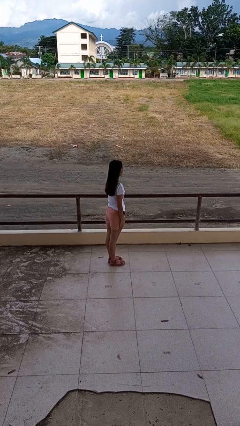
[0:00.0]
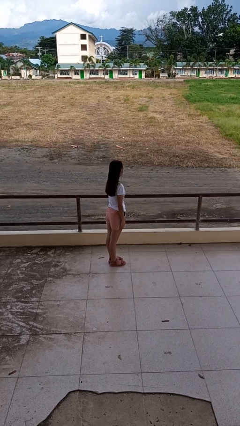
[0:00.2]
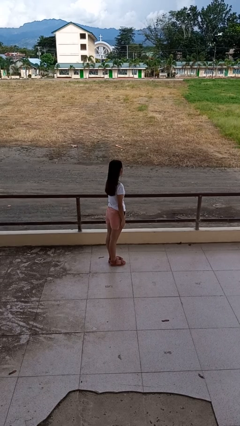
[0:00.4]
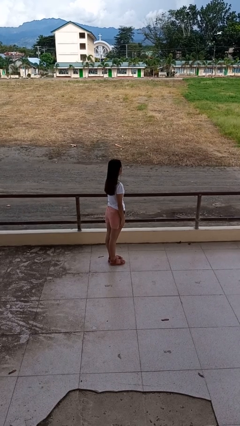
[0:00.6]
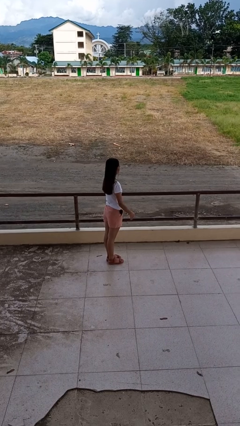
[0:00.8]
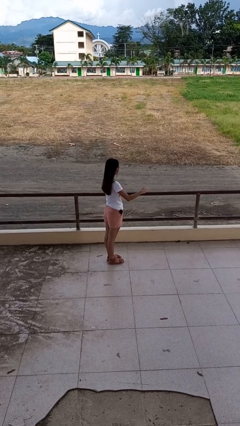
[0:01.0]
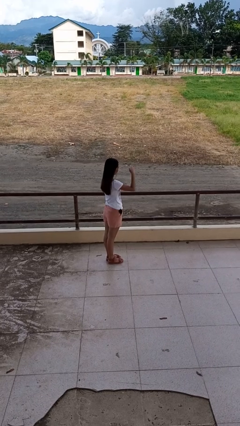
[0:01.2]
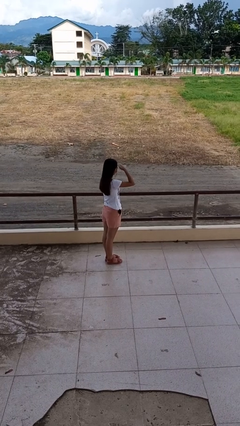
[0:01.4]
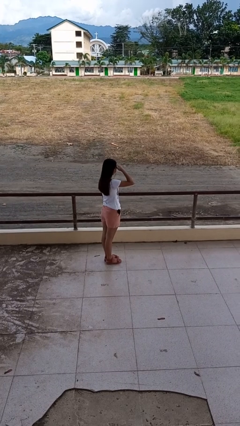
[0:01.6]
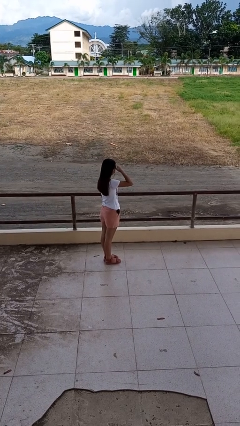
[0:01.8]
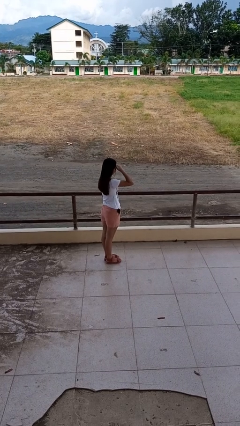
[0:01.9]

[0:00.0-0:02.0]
person shades eyes

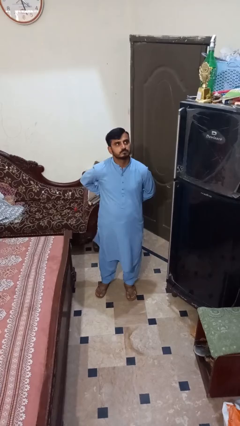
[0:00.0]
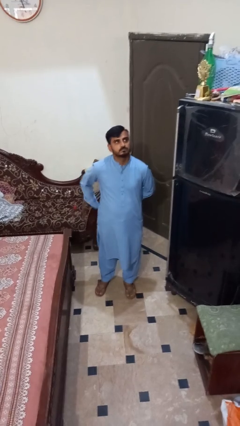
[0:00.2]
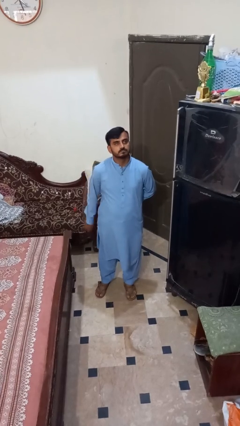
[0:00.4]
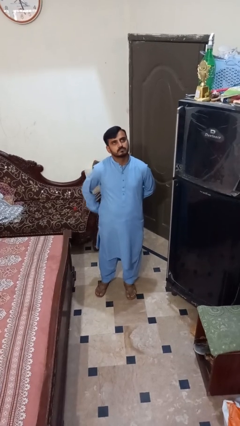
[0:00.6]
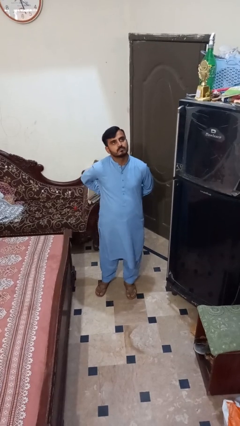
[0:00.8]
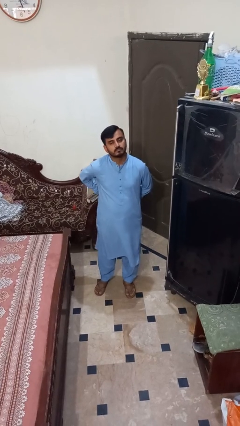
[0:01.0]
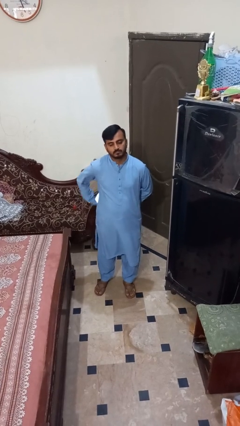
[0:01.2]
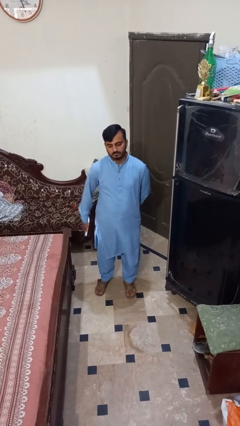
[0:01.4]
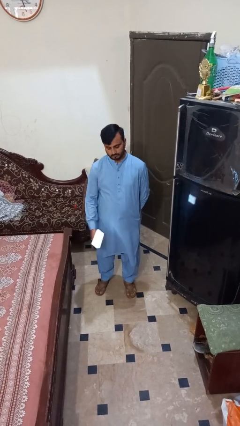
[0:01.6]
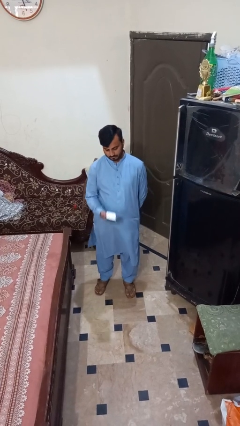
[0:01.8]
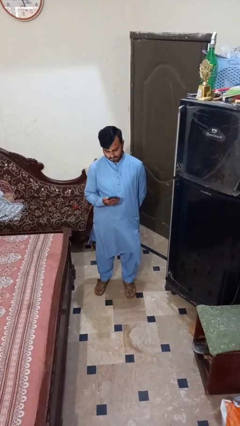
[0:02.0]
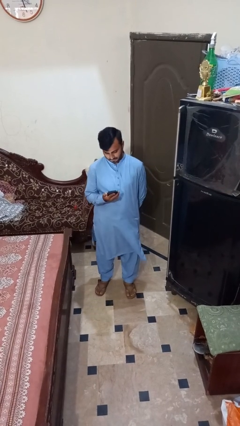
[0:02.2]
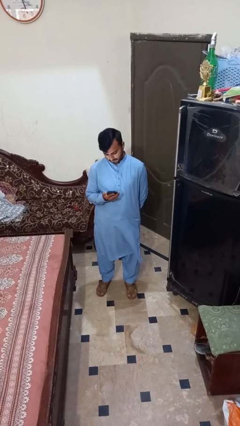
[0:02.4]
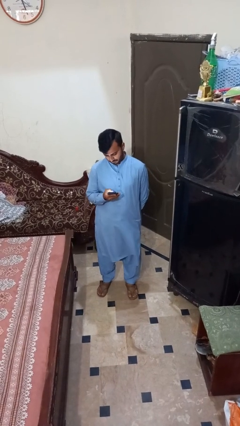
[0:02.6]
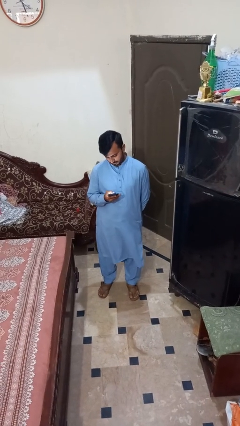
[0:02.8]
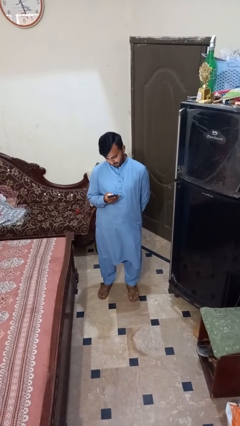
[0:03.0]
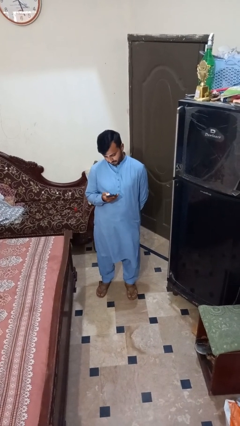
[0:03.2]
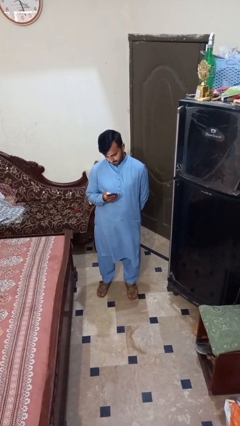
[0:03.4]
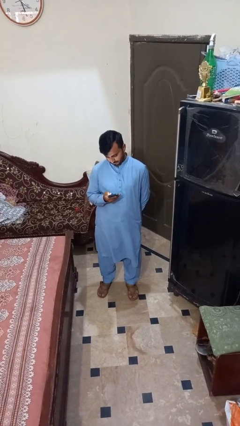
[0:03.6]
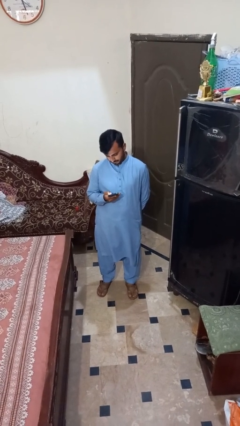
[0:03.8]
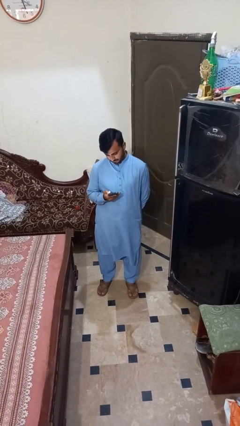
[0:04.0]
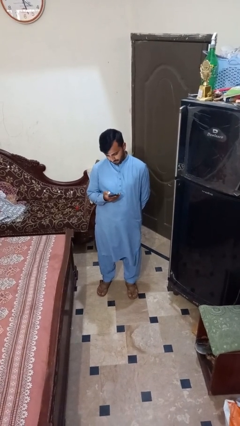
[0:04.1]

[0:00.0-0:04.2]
person takes phone from pocket

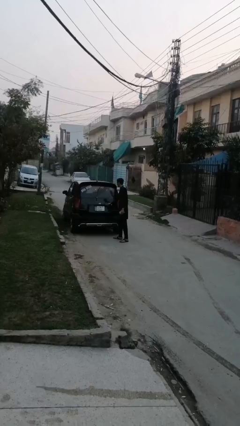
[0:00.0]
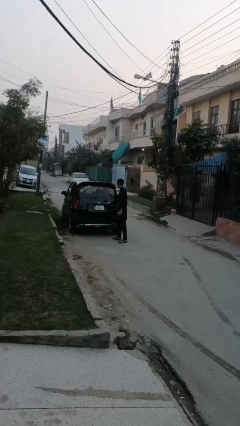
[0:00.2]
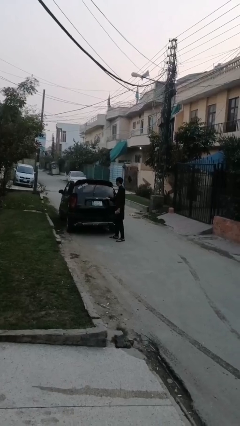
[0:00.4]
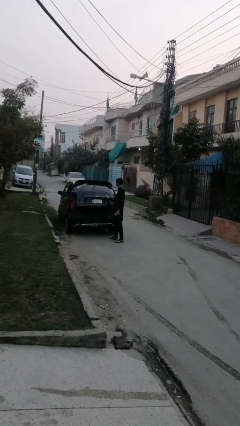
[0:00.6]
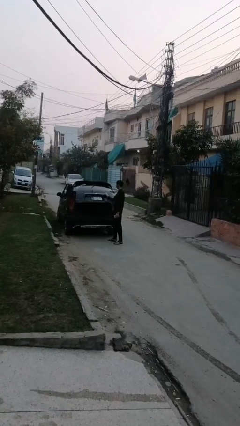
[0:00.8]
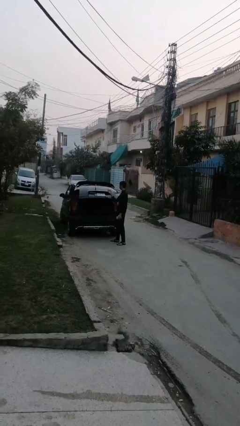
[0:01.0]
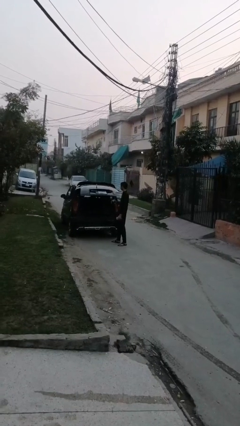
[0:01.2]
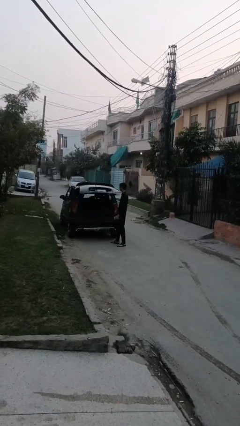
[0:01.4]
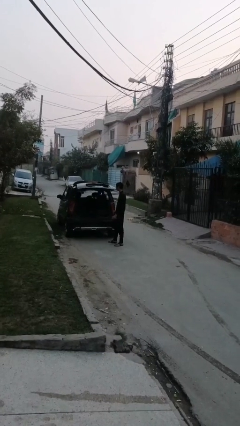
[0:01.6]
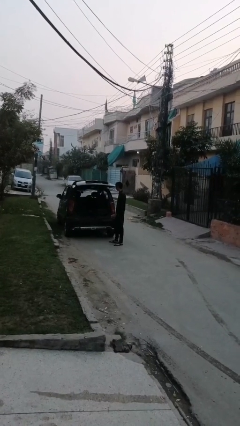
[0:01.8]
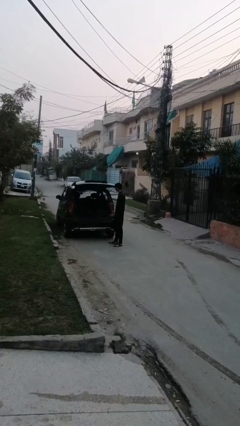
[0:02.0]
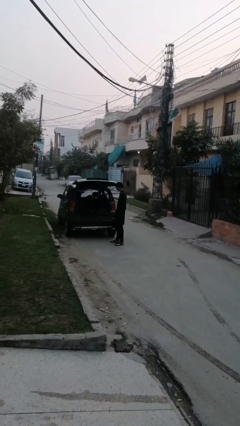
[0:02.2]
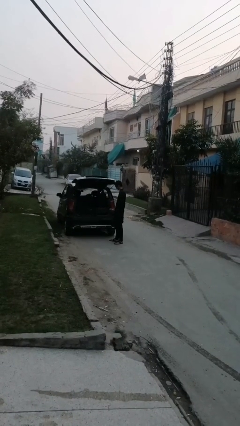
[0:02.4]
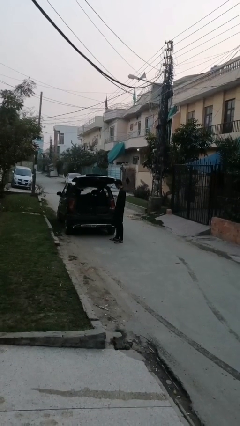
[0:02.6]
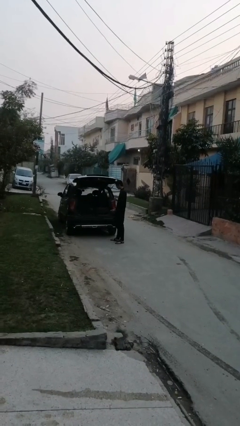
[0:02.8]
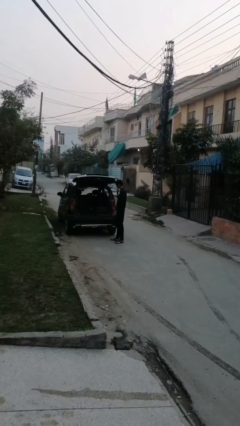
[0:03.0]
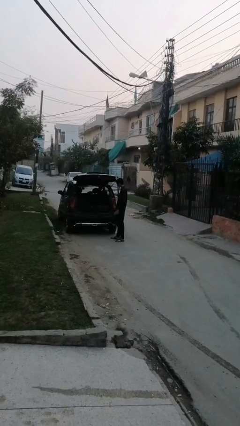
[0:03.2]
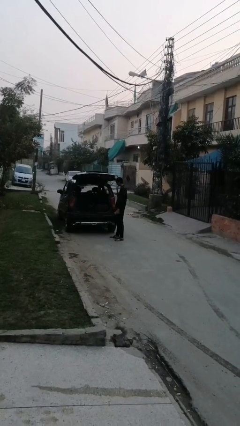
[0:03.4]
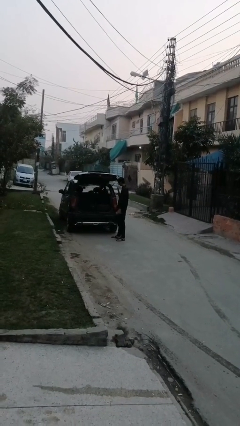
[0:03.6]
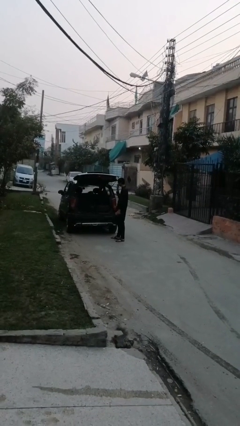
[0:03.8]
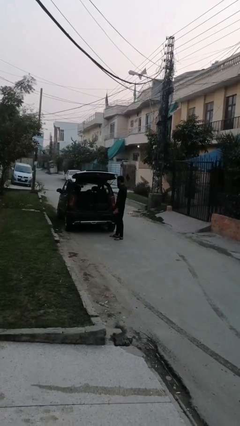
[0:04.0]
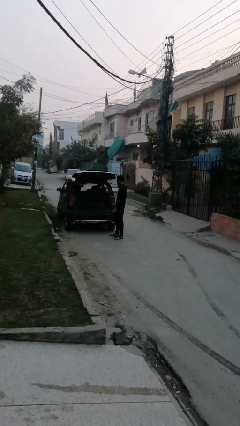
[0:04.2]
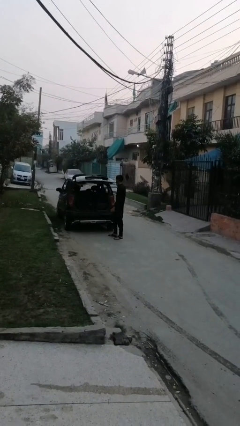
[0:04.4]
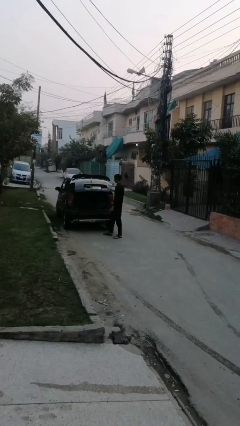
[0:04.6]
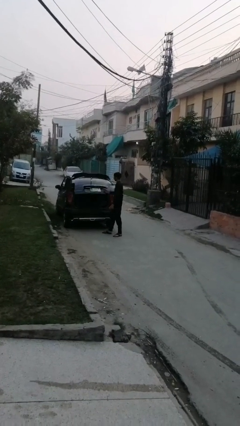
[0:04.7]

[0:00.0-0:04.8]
person opens car trunk

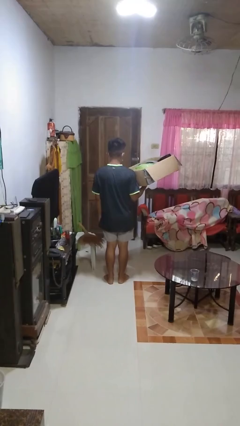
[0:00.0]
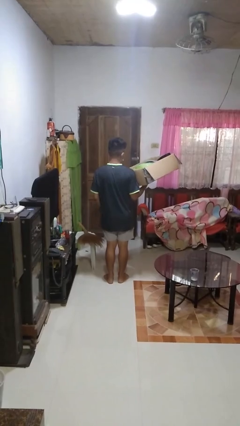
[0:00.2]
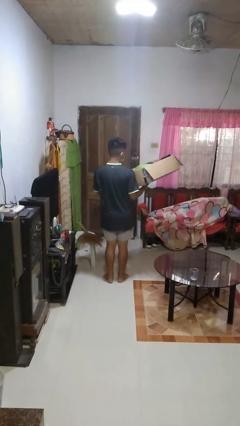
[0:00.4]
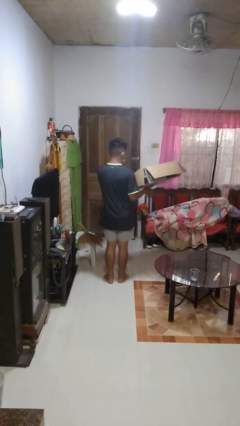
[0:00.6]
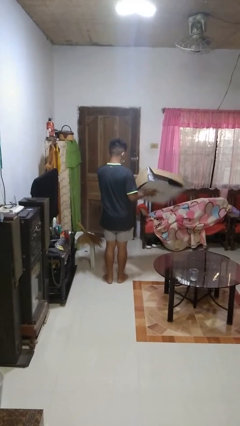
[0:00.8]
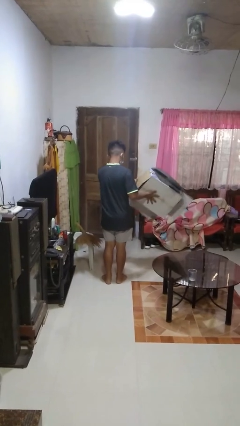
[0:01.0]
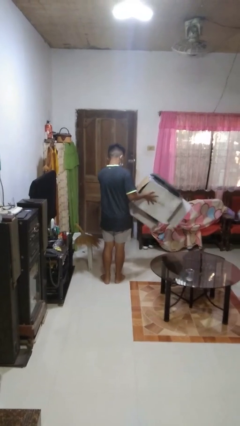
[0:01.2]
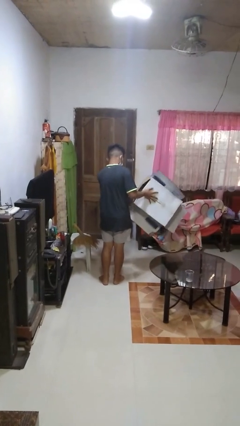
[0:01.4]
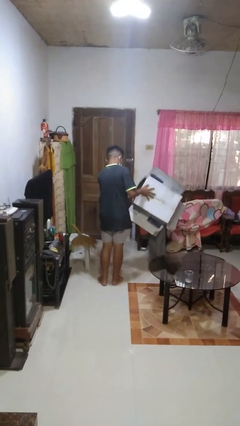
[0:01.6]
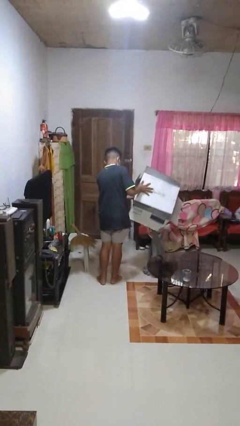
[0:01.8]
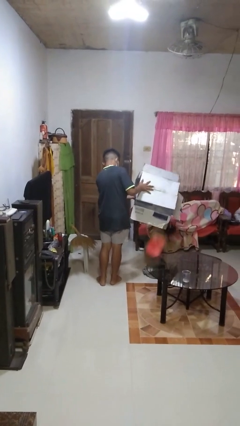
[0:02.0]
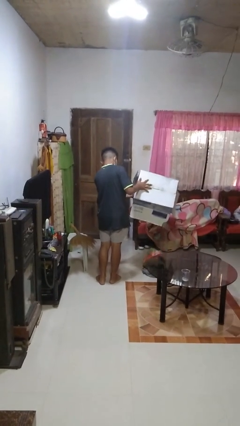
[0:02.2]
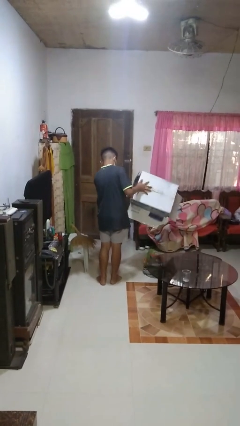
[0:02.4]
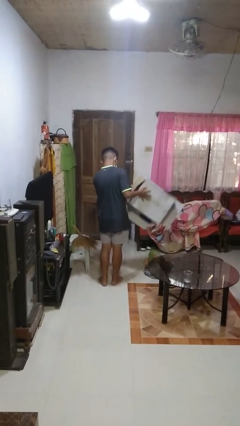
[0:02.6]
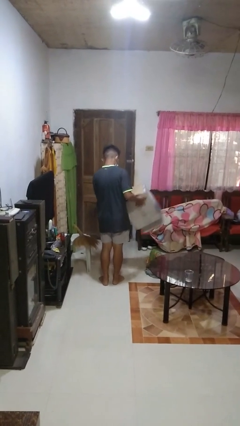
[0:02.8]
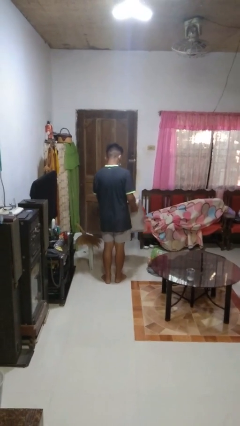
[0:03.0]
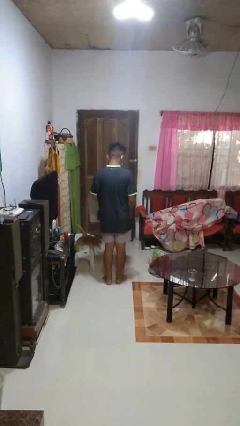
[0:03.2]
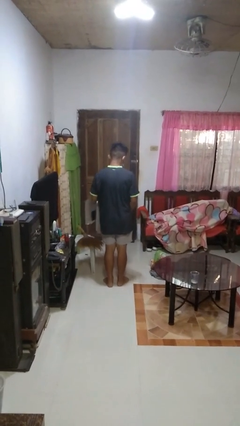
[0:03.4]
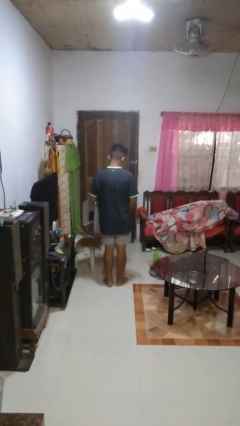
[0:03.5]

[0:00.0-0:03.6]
person unloads box onto floor

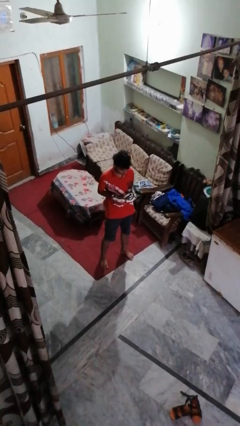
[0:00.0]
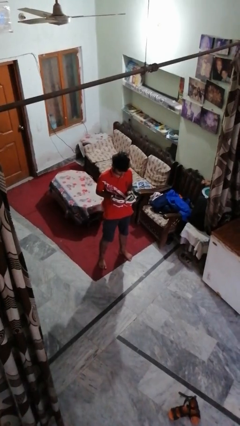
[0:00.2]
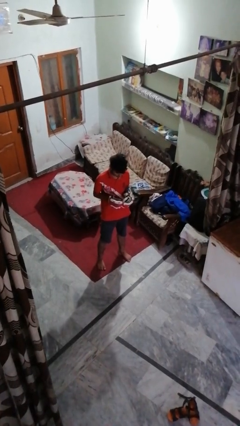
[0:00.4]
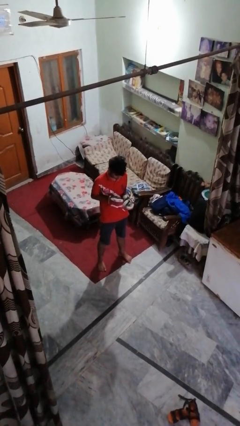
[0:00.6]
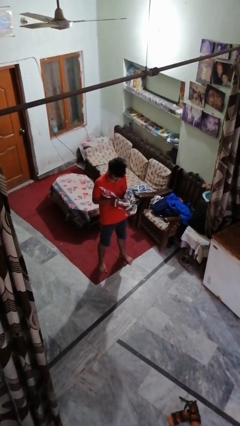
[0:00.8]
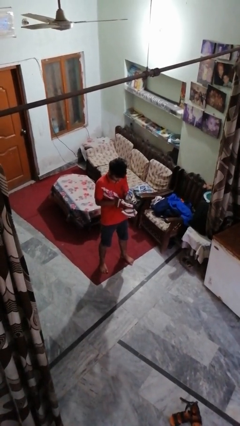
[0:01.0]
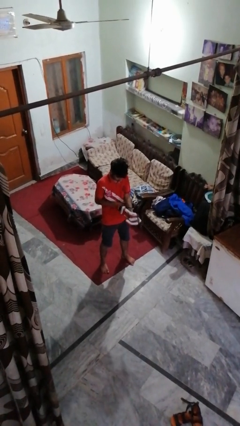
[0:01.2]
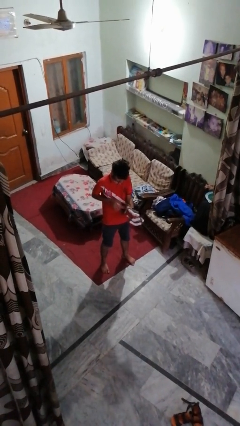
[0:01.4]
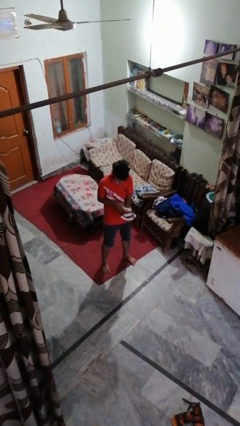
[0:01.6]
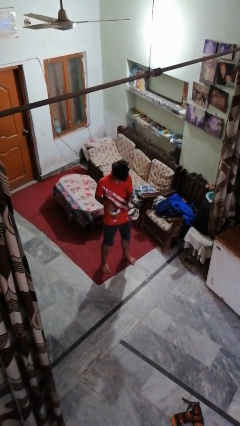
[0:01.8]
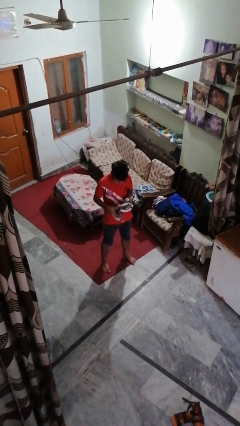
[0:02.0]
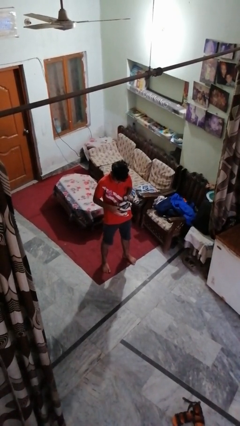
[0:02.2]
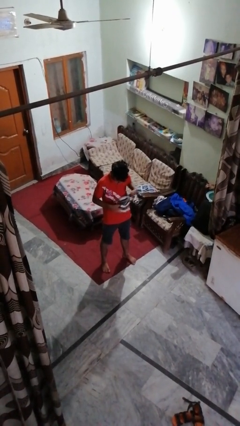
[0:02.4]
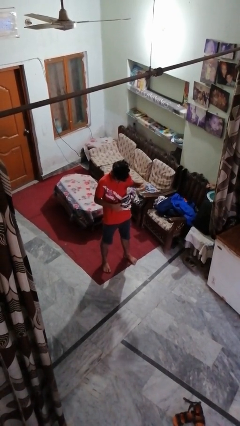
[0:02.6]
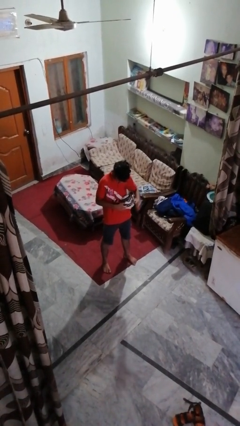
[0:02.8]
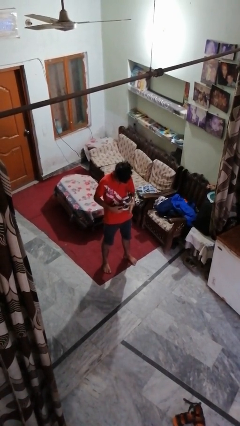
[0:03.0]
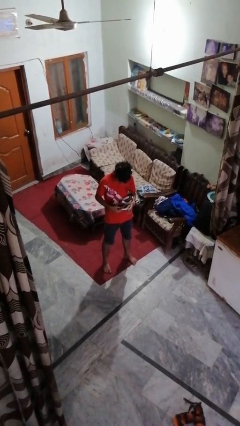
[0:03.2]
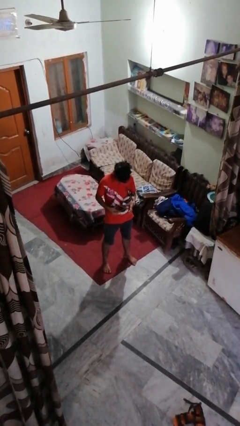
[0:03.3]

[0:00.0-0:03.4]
person takes off gloves
